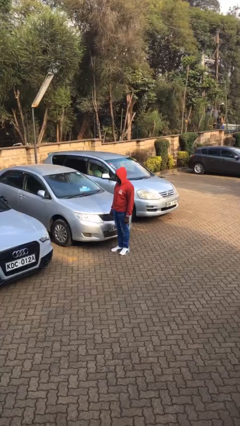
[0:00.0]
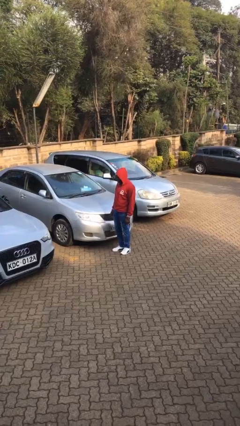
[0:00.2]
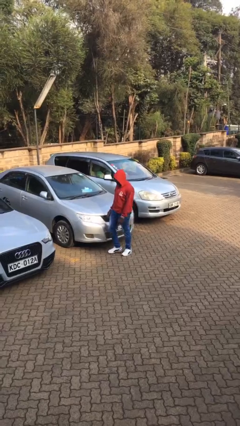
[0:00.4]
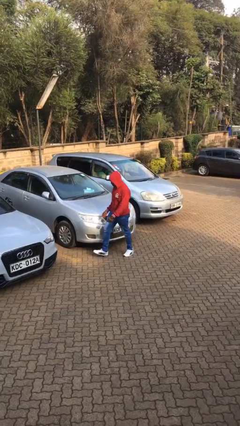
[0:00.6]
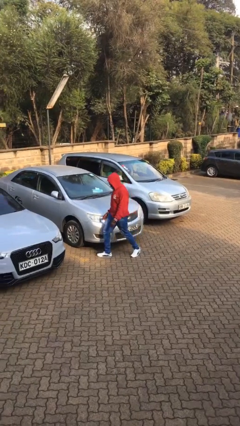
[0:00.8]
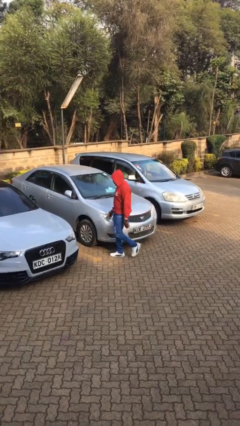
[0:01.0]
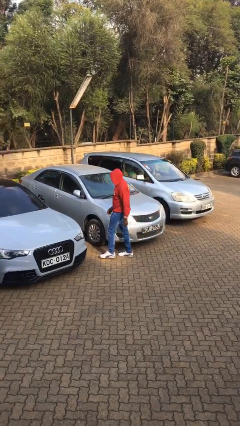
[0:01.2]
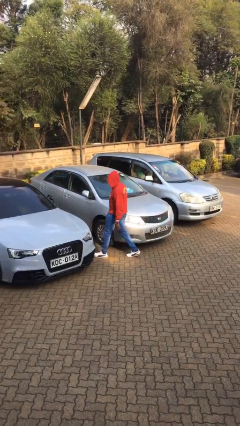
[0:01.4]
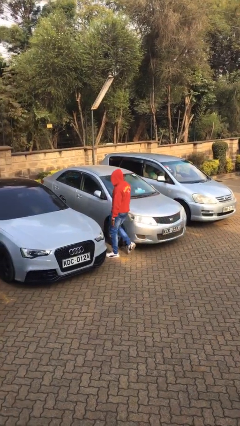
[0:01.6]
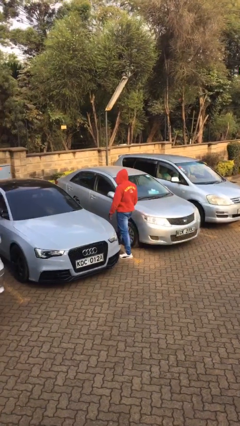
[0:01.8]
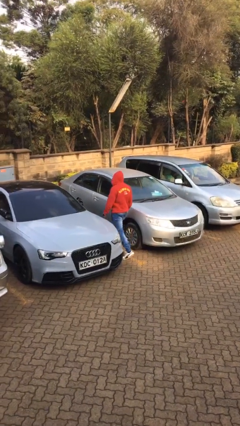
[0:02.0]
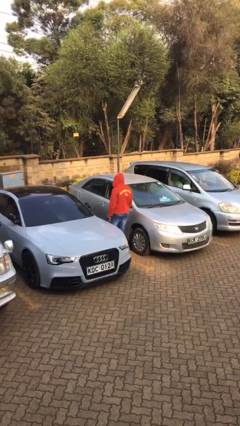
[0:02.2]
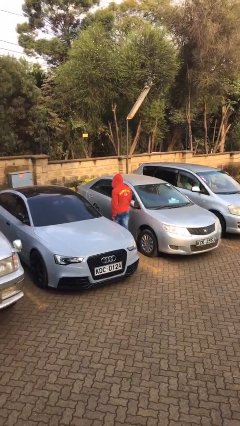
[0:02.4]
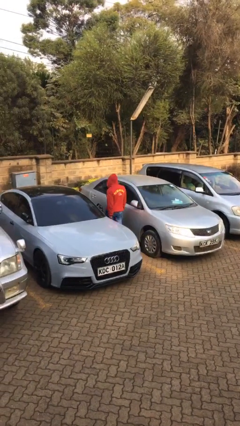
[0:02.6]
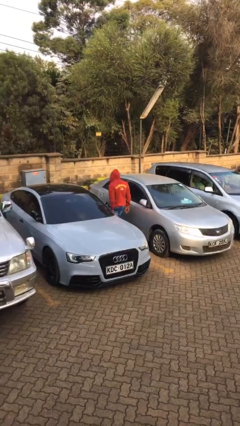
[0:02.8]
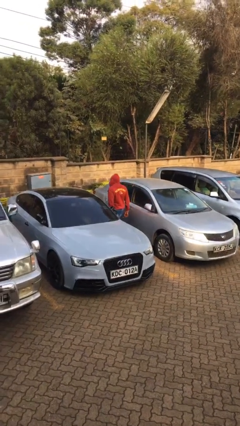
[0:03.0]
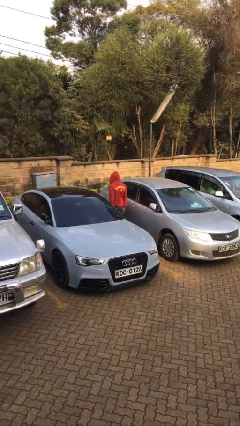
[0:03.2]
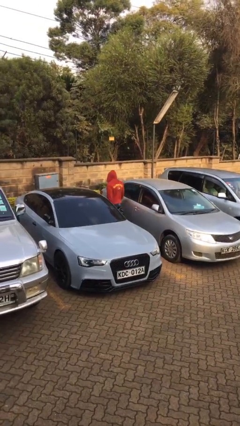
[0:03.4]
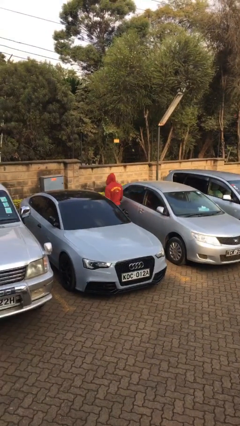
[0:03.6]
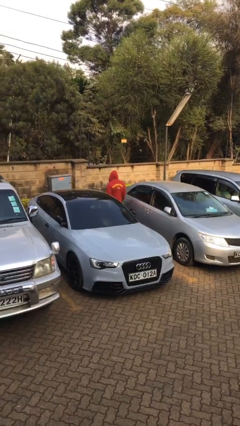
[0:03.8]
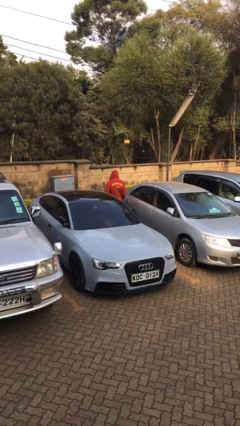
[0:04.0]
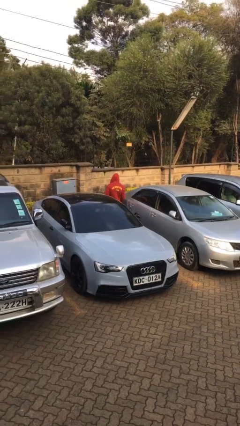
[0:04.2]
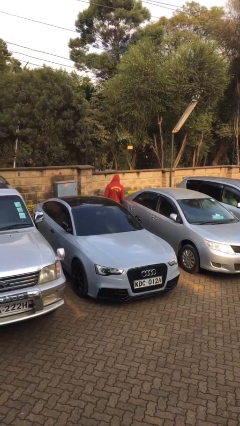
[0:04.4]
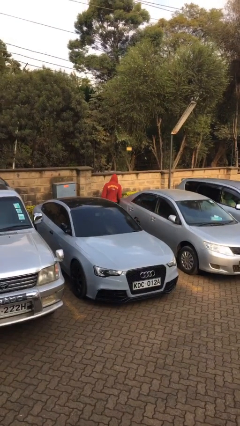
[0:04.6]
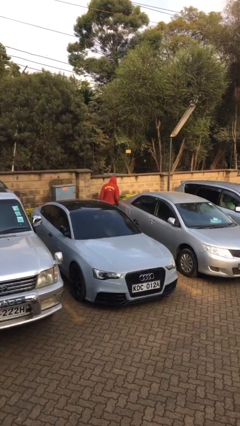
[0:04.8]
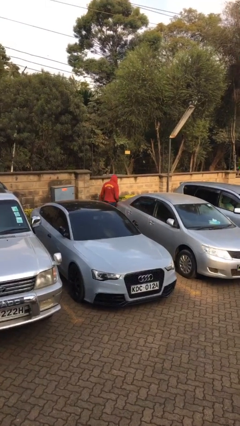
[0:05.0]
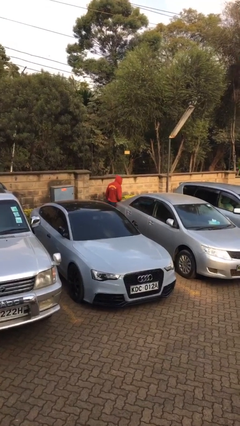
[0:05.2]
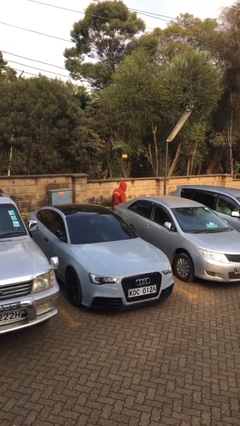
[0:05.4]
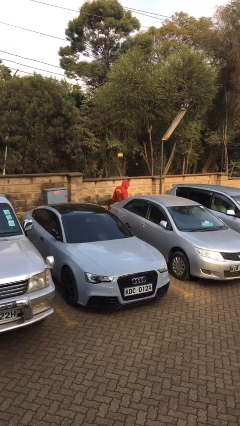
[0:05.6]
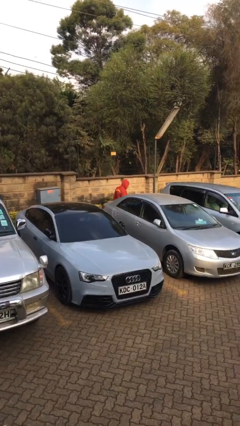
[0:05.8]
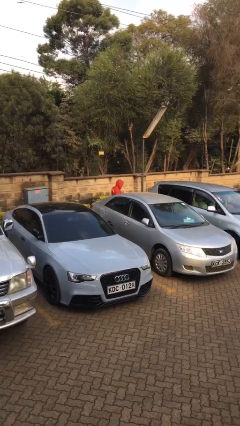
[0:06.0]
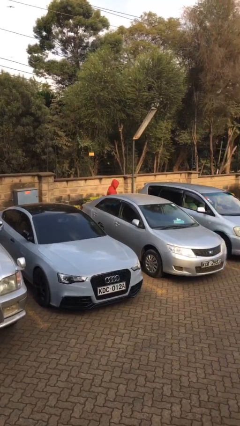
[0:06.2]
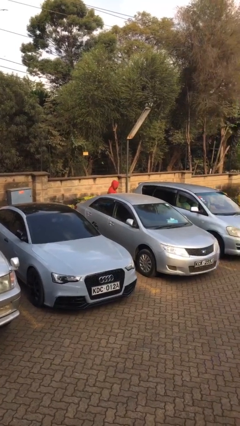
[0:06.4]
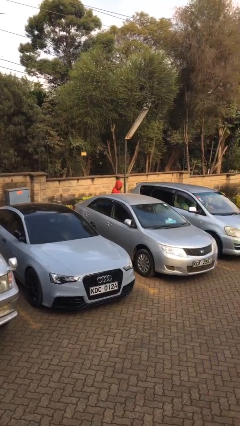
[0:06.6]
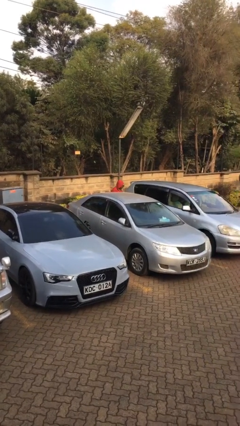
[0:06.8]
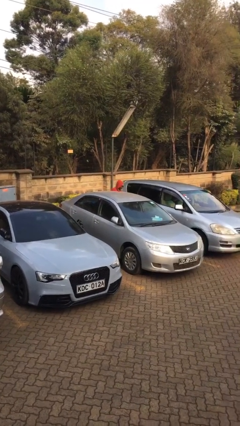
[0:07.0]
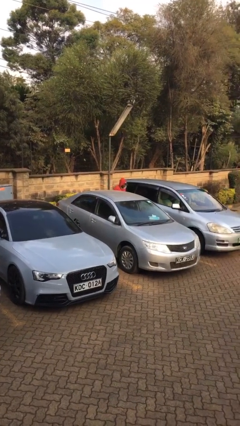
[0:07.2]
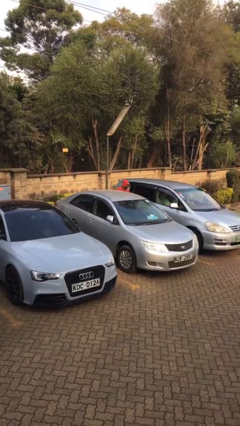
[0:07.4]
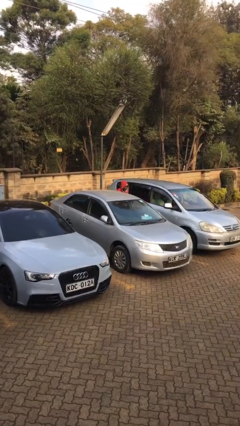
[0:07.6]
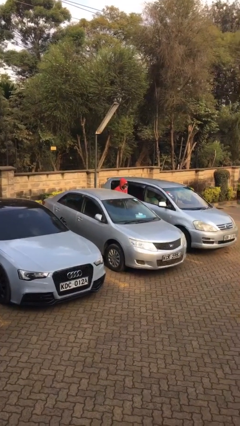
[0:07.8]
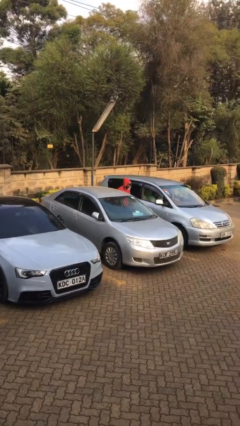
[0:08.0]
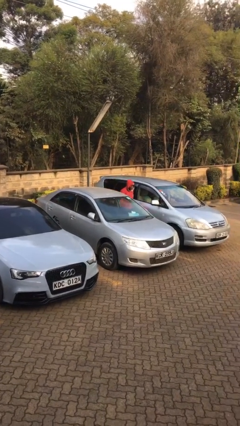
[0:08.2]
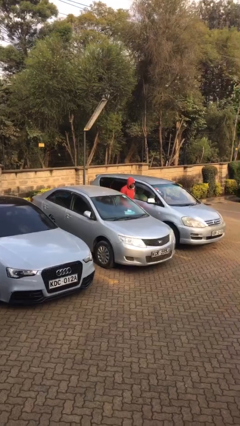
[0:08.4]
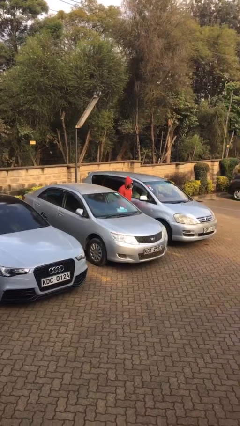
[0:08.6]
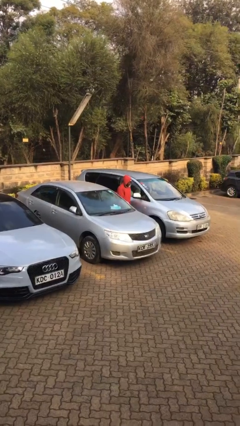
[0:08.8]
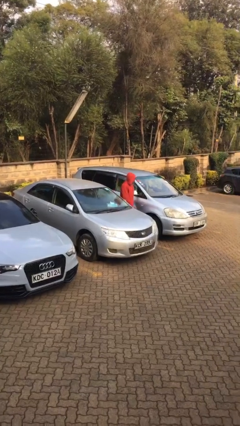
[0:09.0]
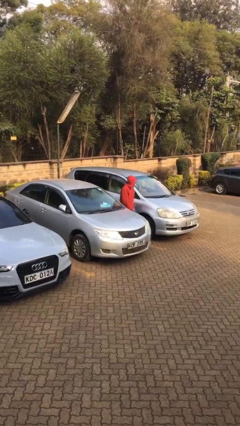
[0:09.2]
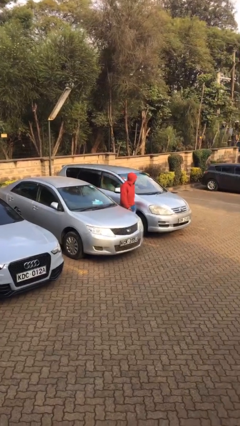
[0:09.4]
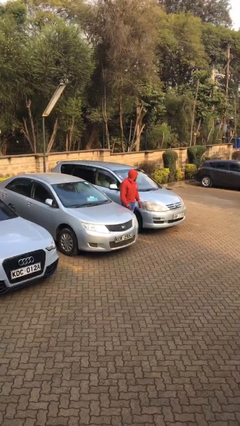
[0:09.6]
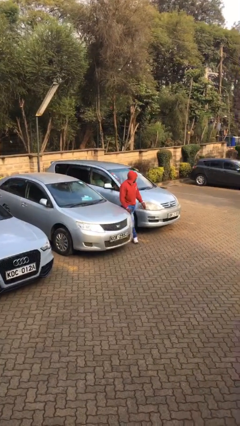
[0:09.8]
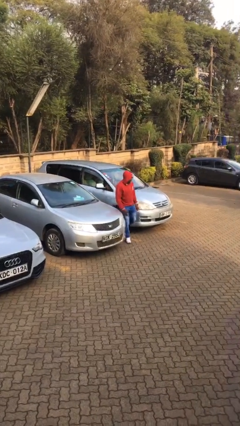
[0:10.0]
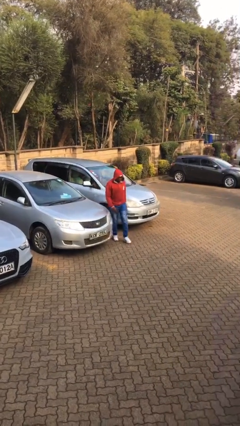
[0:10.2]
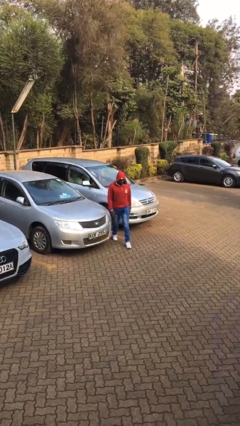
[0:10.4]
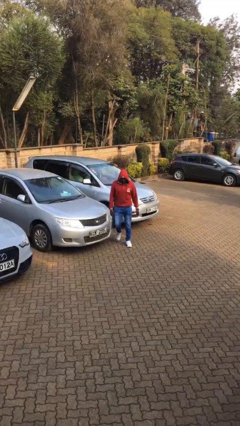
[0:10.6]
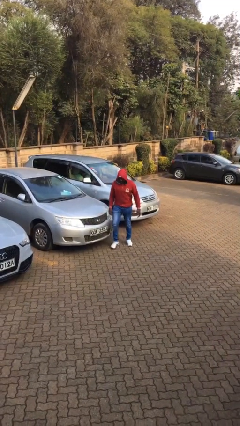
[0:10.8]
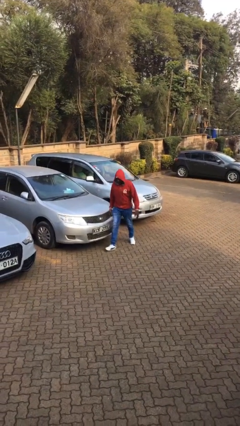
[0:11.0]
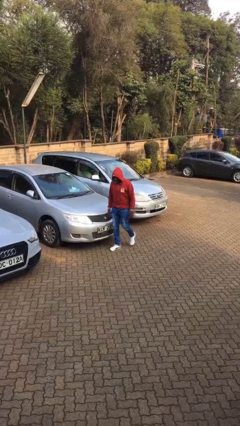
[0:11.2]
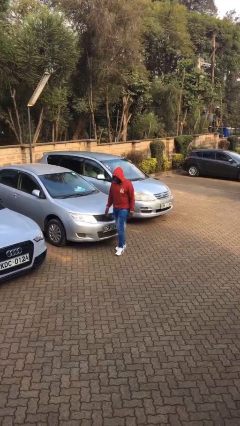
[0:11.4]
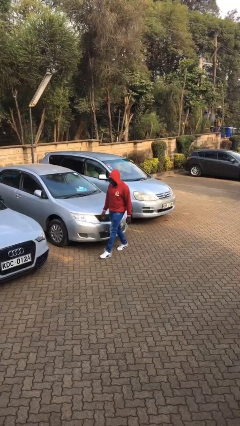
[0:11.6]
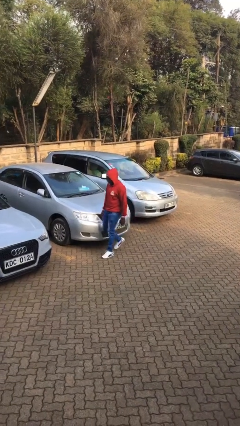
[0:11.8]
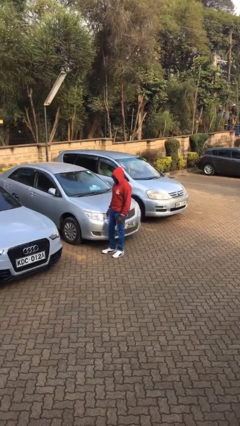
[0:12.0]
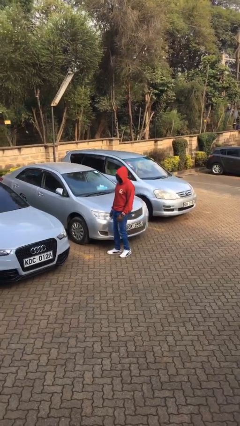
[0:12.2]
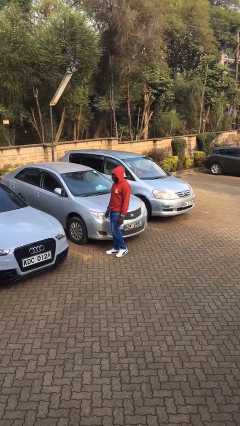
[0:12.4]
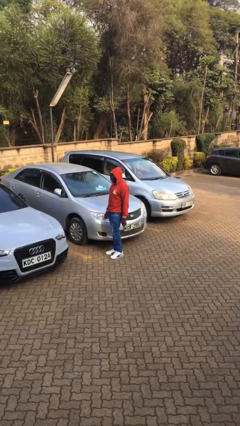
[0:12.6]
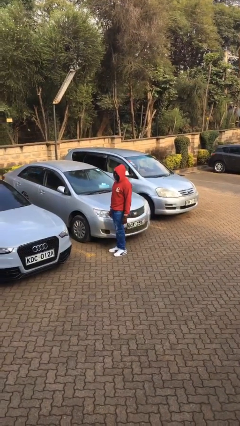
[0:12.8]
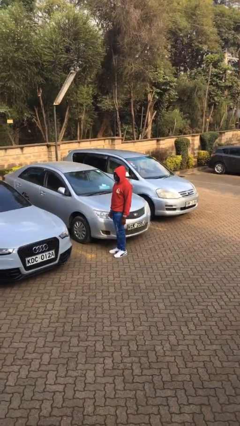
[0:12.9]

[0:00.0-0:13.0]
person walks around car

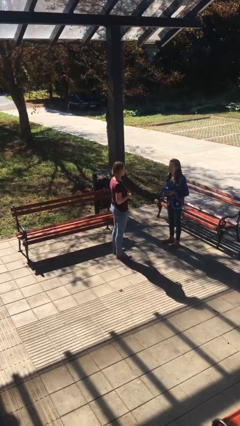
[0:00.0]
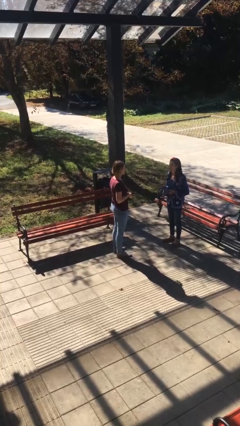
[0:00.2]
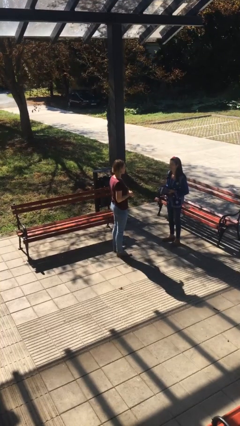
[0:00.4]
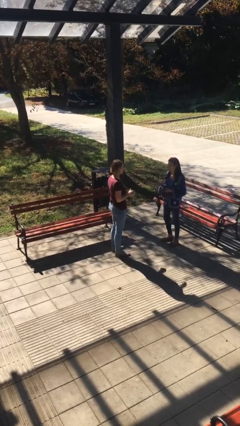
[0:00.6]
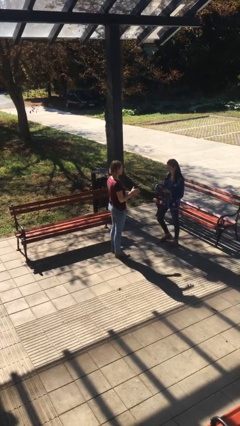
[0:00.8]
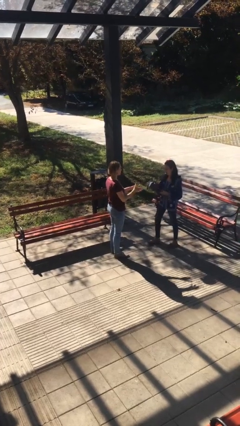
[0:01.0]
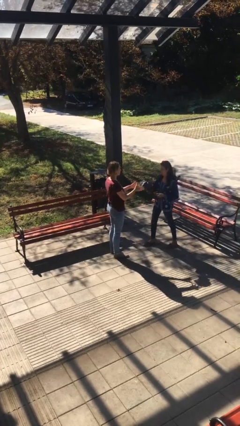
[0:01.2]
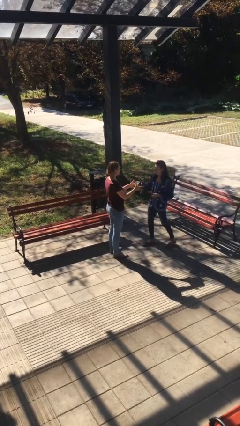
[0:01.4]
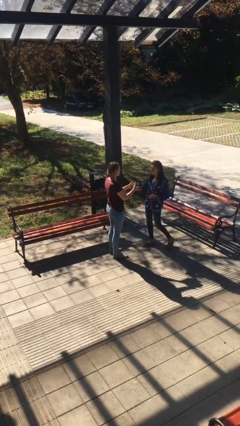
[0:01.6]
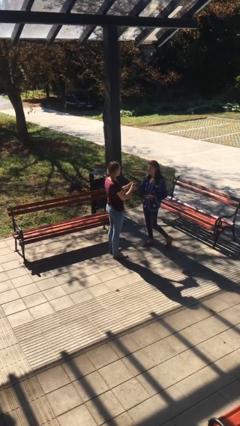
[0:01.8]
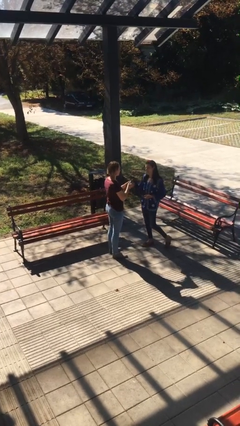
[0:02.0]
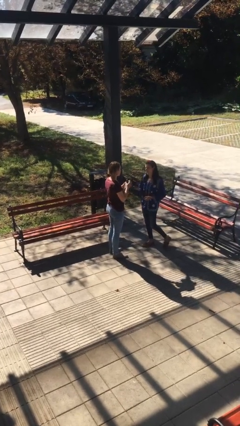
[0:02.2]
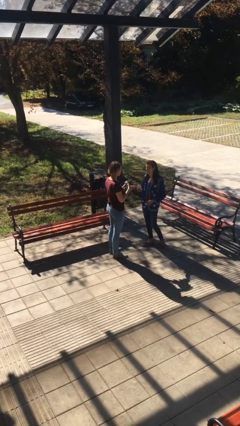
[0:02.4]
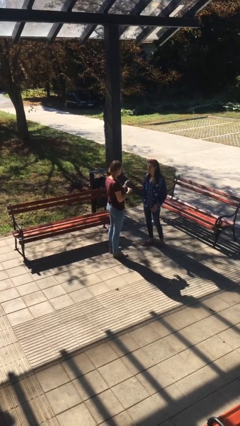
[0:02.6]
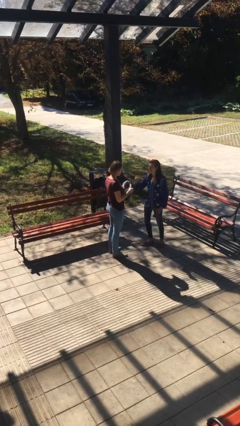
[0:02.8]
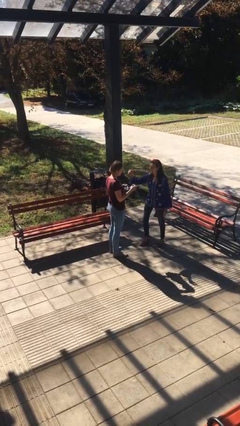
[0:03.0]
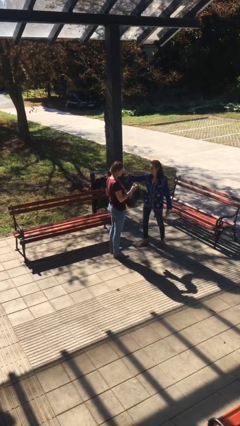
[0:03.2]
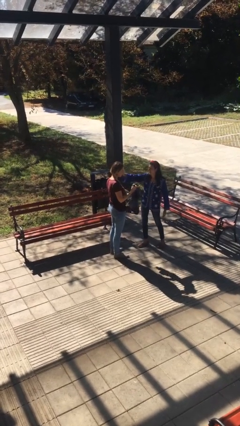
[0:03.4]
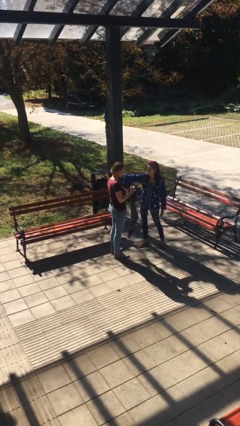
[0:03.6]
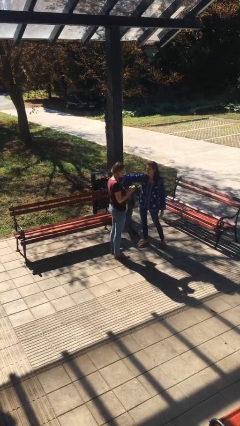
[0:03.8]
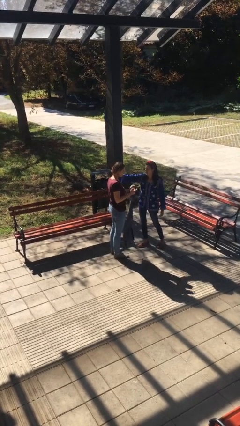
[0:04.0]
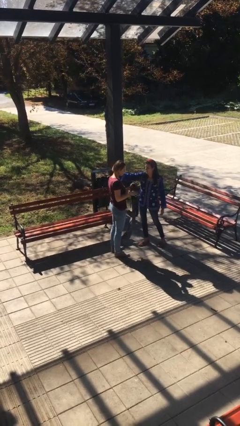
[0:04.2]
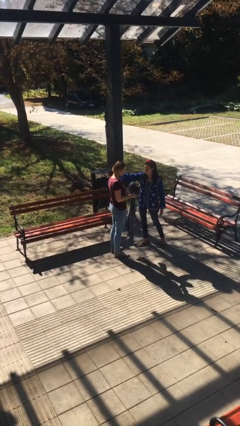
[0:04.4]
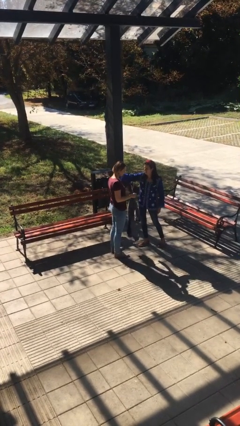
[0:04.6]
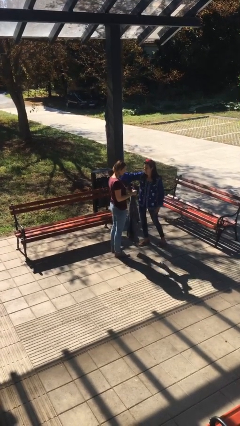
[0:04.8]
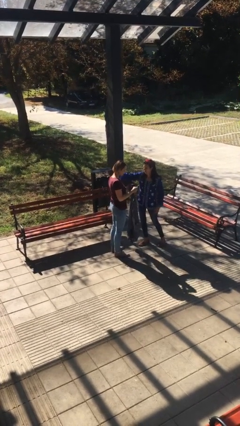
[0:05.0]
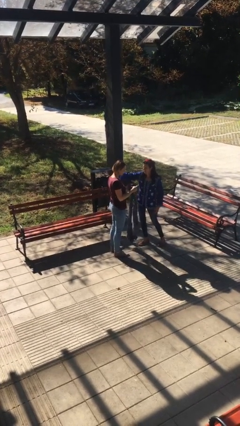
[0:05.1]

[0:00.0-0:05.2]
person transfers object to person
